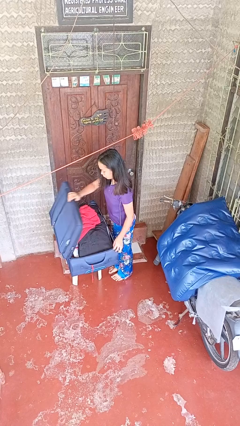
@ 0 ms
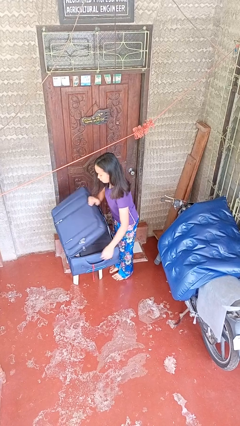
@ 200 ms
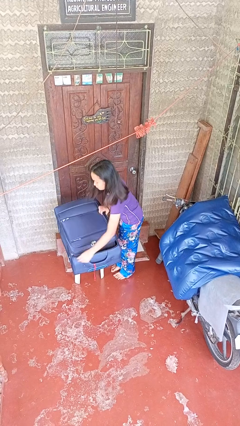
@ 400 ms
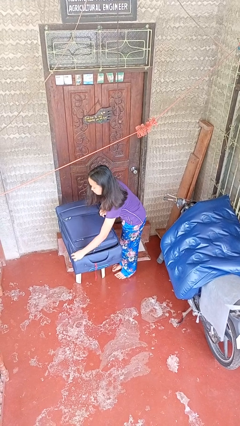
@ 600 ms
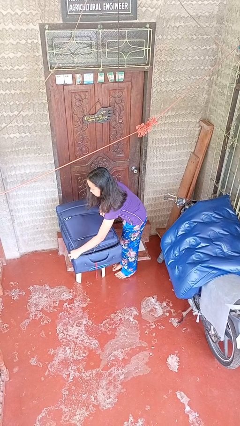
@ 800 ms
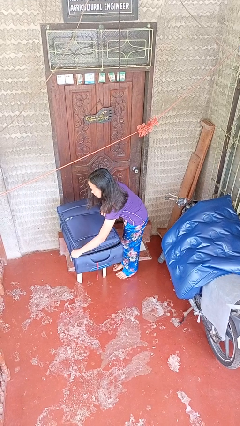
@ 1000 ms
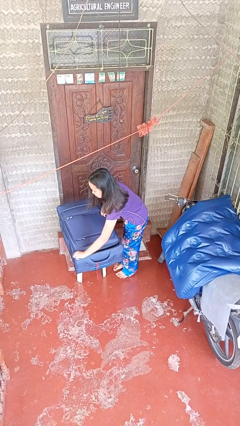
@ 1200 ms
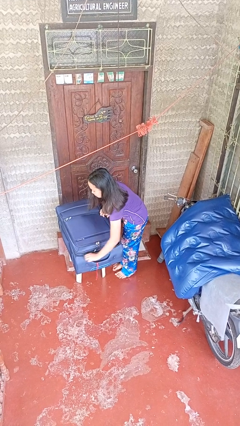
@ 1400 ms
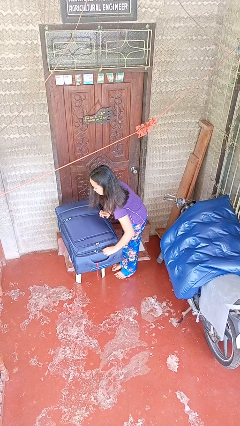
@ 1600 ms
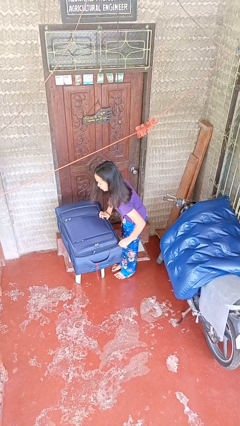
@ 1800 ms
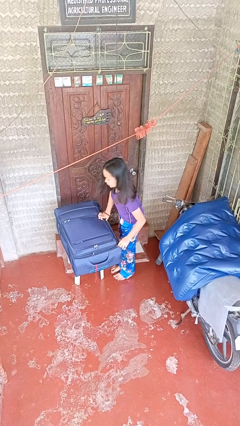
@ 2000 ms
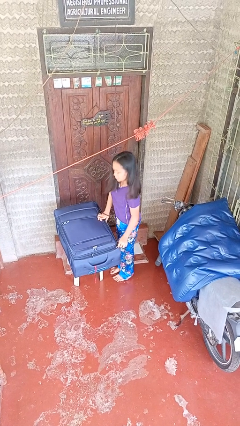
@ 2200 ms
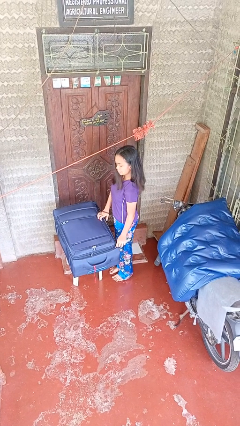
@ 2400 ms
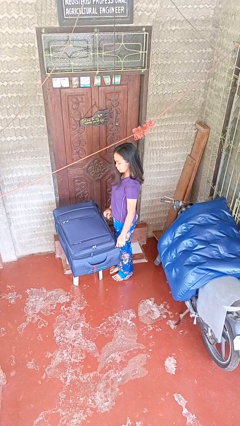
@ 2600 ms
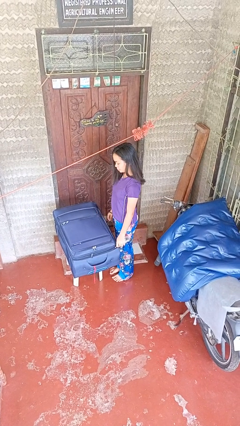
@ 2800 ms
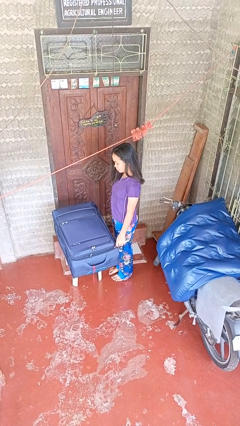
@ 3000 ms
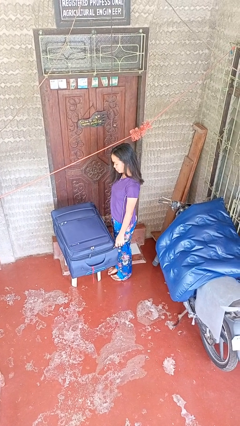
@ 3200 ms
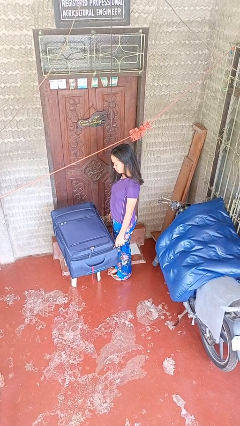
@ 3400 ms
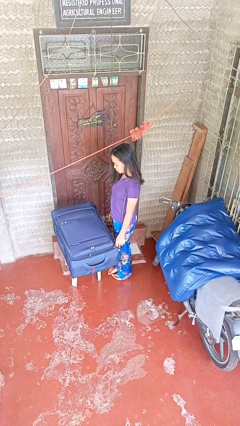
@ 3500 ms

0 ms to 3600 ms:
person closes suitcase

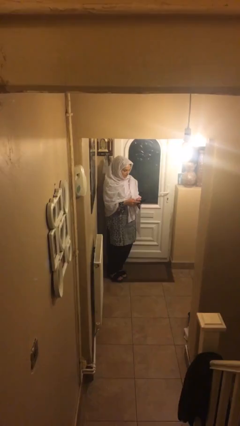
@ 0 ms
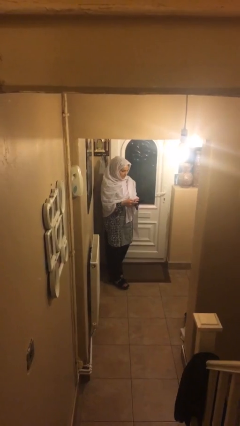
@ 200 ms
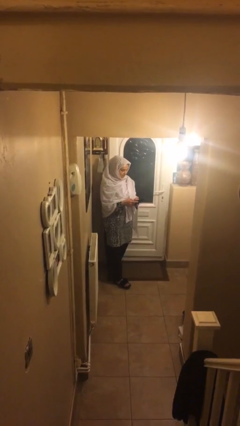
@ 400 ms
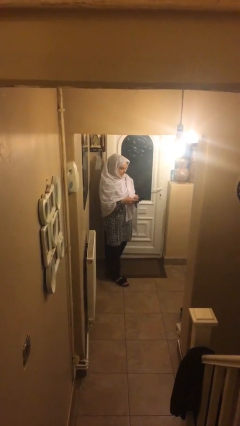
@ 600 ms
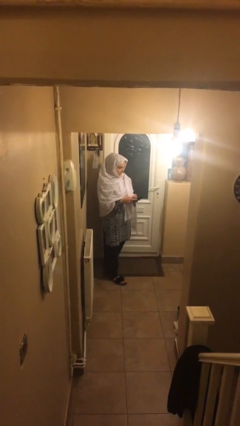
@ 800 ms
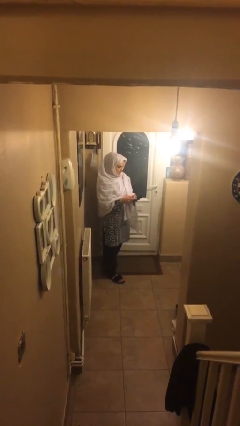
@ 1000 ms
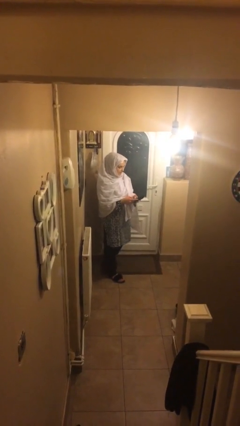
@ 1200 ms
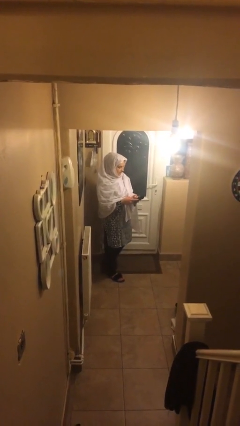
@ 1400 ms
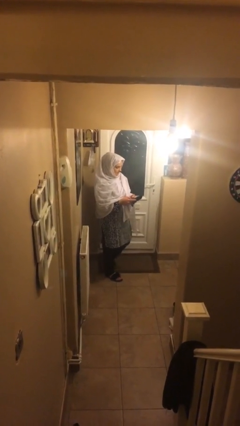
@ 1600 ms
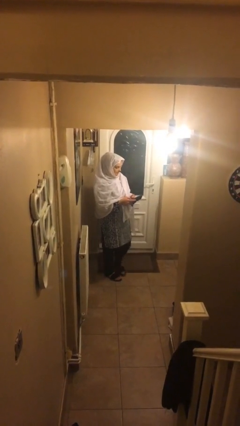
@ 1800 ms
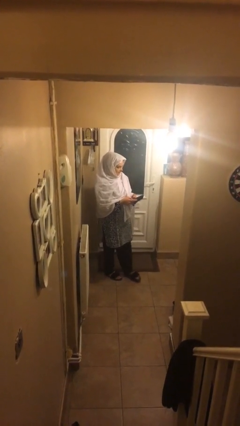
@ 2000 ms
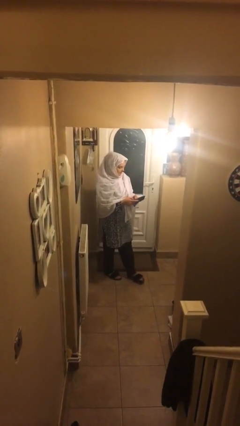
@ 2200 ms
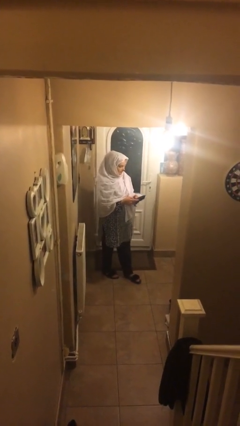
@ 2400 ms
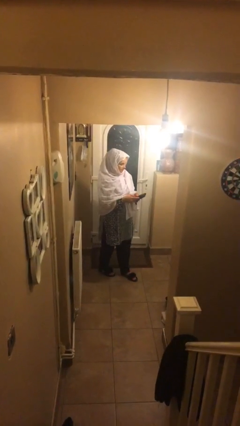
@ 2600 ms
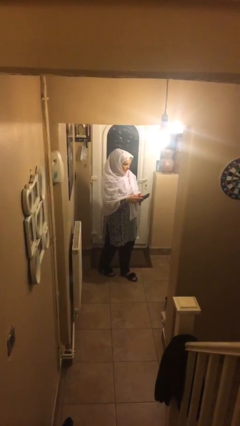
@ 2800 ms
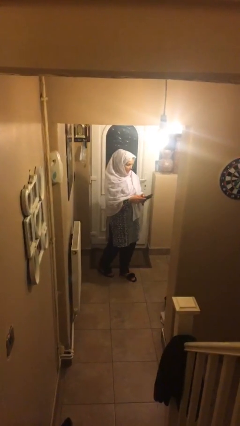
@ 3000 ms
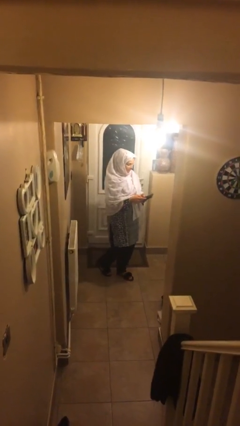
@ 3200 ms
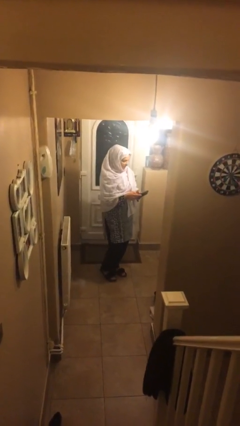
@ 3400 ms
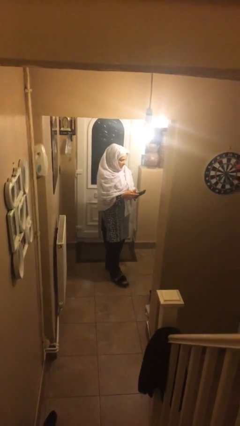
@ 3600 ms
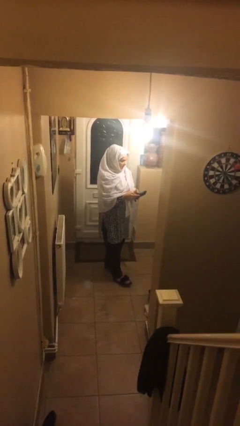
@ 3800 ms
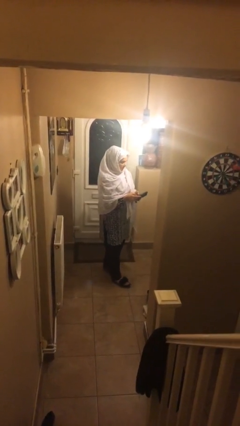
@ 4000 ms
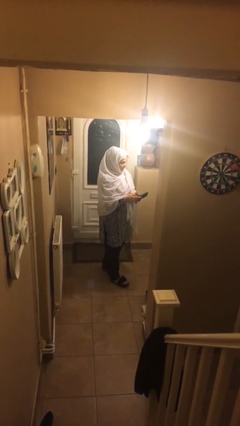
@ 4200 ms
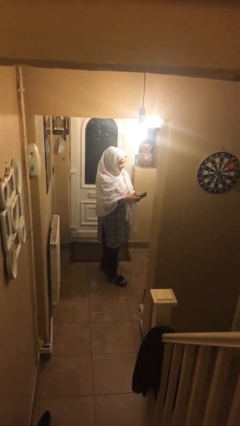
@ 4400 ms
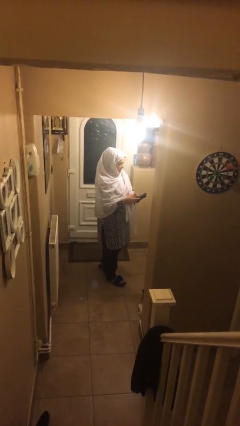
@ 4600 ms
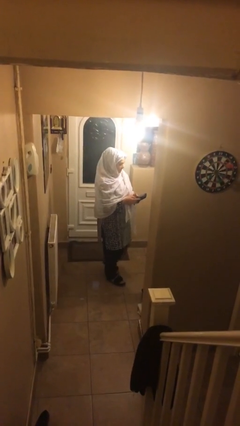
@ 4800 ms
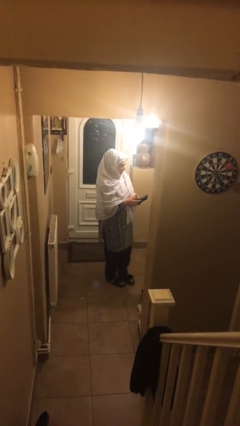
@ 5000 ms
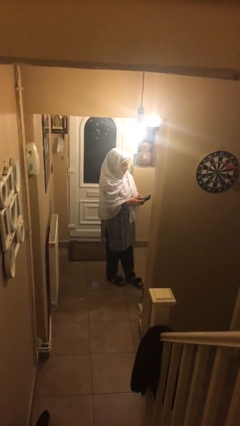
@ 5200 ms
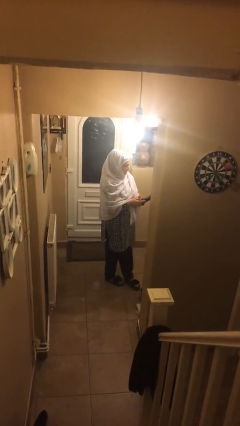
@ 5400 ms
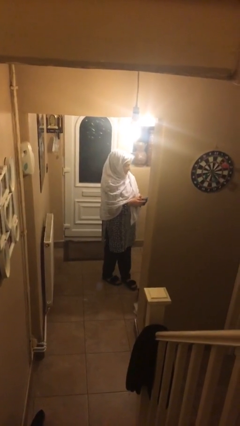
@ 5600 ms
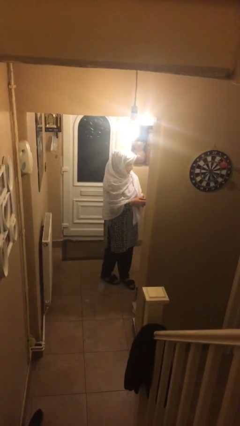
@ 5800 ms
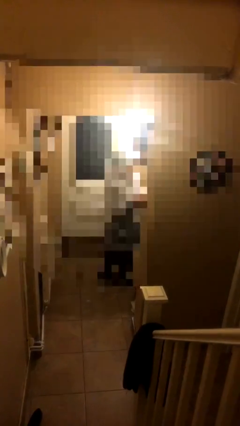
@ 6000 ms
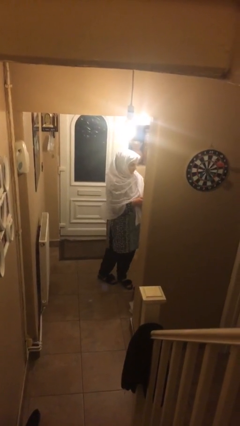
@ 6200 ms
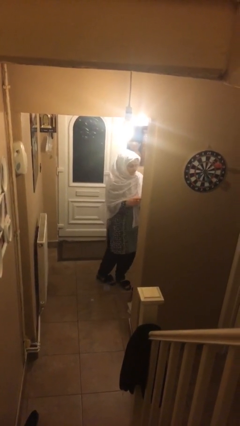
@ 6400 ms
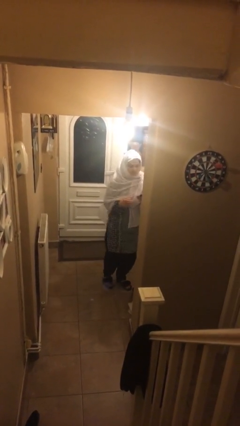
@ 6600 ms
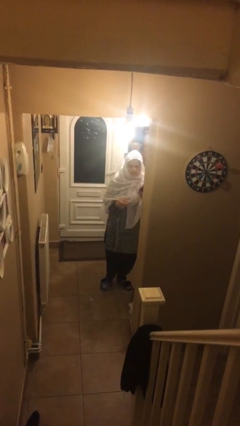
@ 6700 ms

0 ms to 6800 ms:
person texts on phone

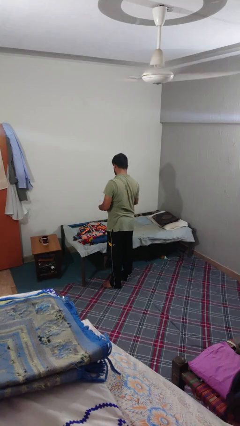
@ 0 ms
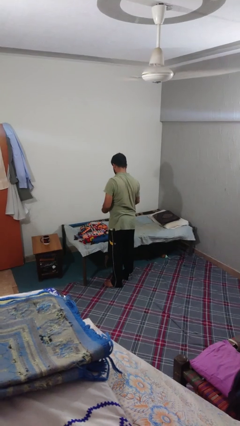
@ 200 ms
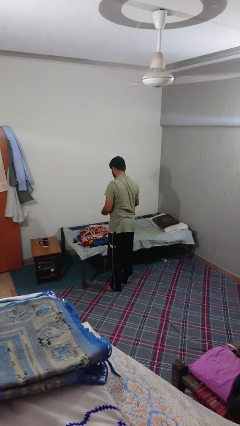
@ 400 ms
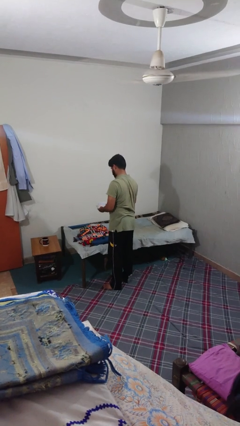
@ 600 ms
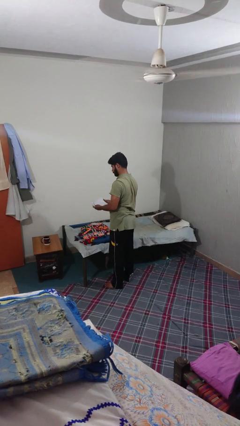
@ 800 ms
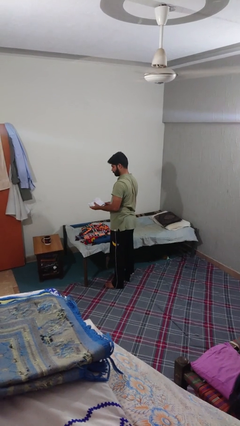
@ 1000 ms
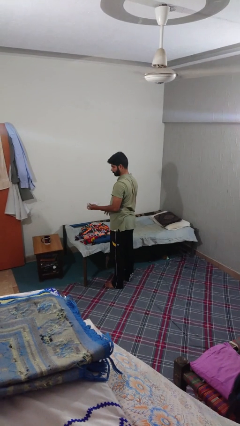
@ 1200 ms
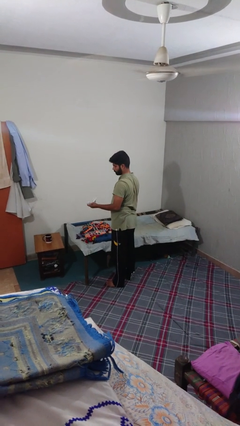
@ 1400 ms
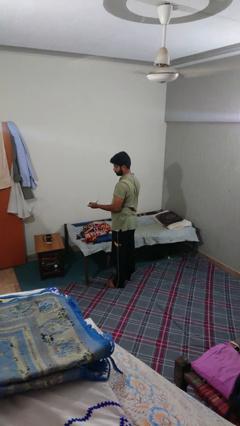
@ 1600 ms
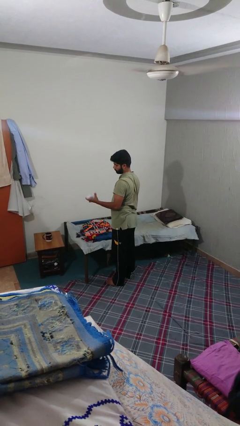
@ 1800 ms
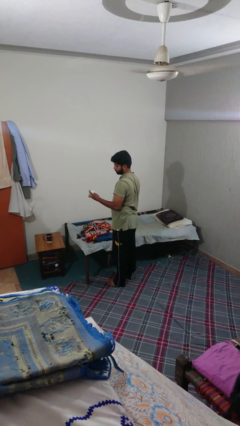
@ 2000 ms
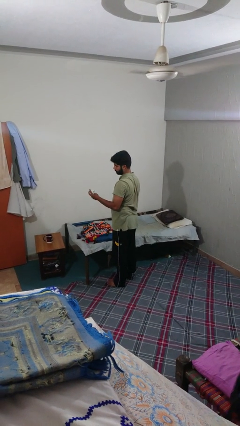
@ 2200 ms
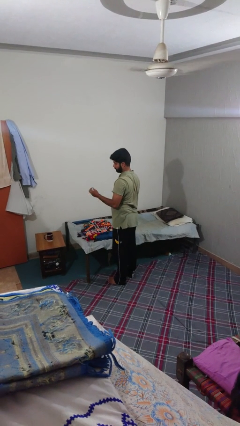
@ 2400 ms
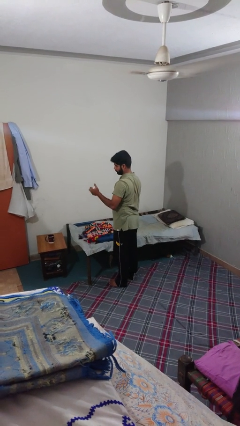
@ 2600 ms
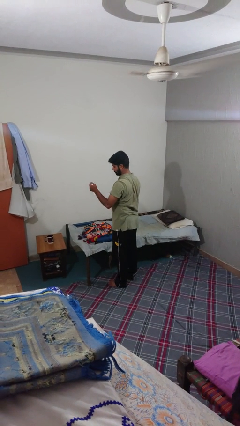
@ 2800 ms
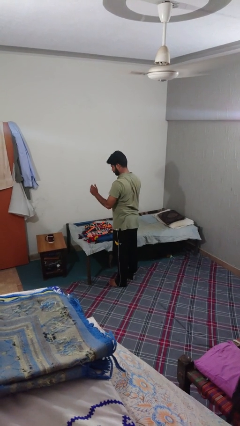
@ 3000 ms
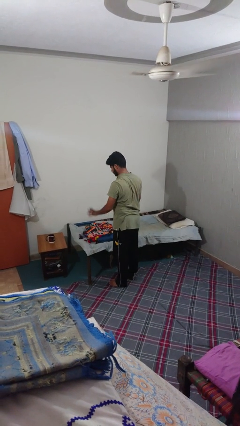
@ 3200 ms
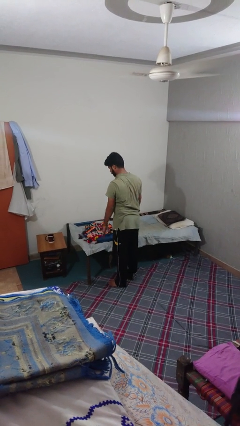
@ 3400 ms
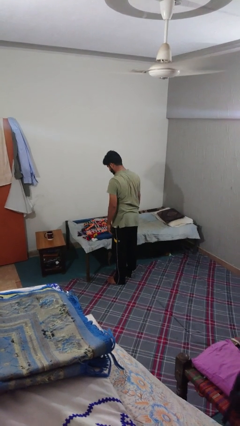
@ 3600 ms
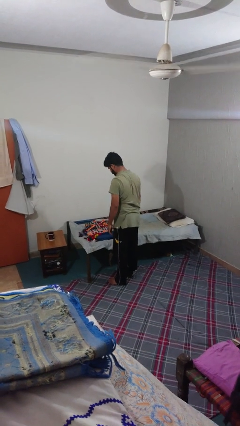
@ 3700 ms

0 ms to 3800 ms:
person crumples paper

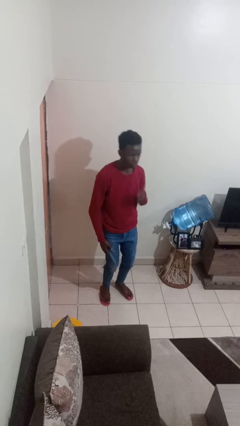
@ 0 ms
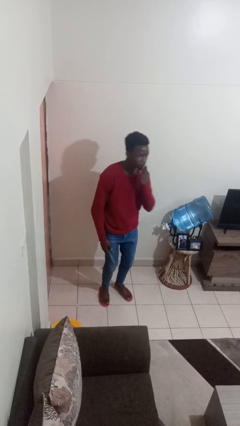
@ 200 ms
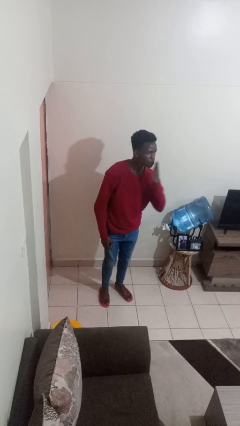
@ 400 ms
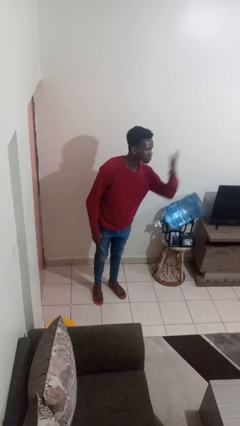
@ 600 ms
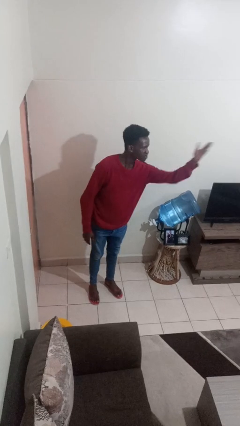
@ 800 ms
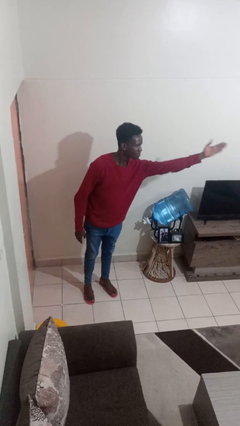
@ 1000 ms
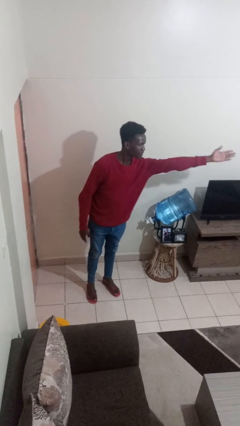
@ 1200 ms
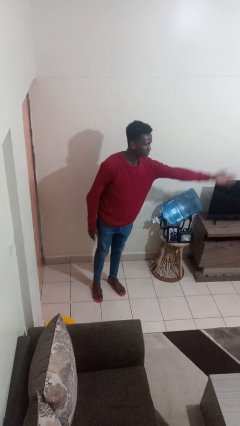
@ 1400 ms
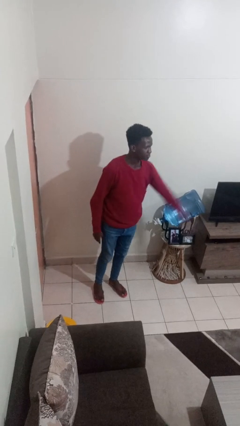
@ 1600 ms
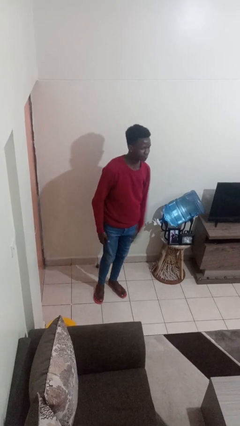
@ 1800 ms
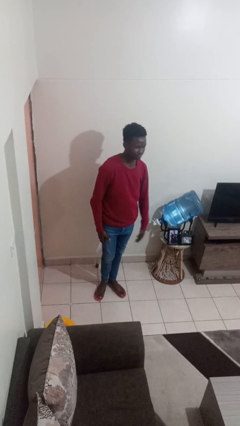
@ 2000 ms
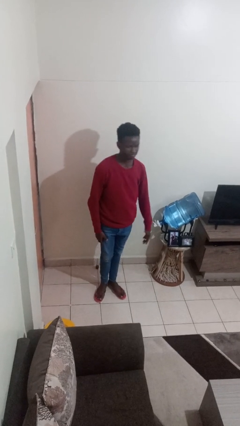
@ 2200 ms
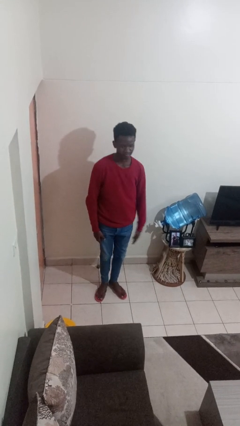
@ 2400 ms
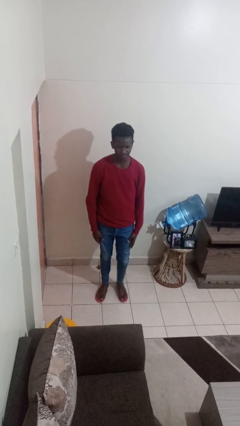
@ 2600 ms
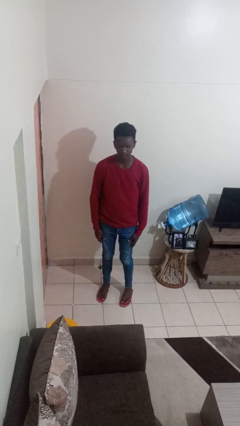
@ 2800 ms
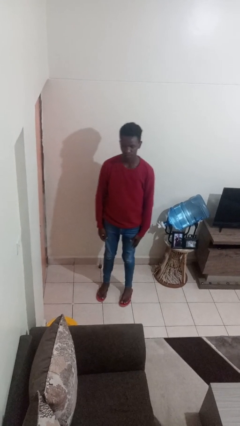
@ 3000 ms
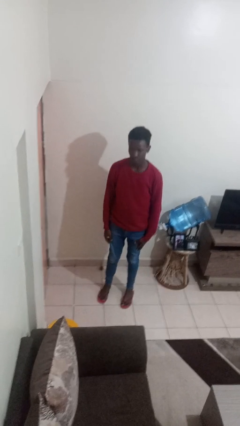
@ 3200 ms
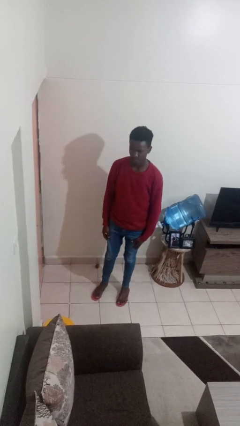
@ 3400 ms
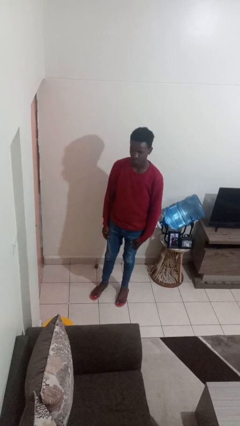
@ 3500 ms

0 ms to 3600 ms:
person gestures blow kiss

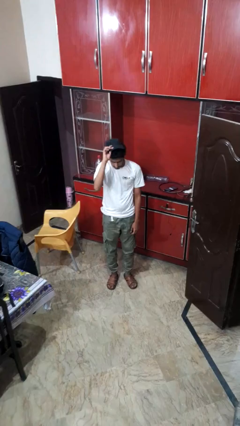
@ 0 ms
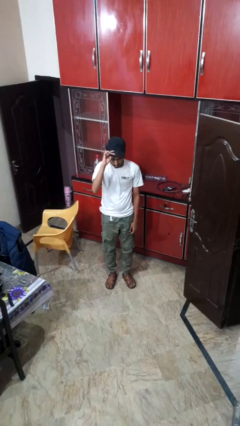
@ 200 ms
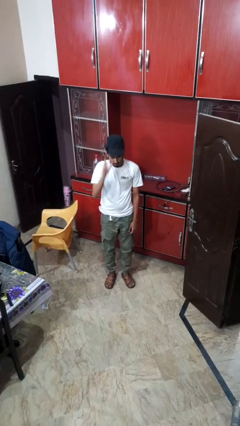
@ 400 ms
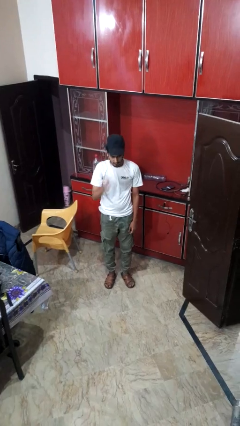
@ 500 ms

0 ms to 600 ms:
person puts on hat
